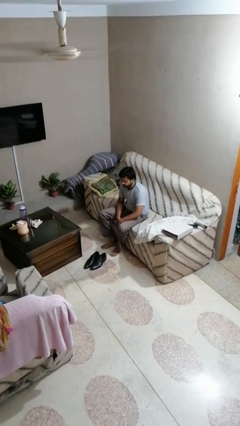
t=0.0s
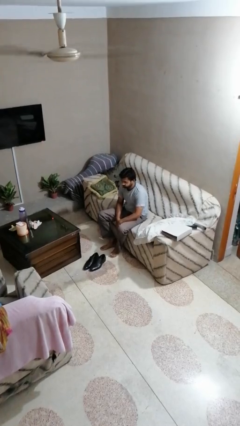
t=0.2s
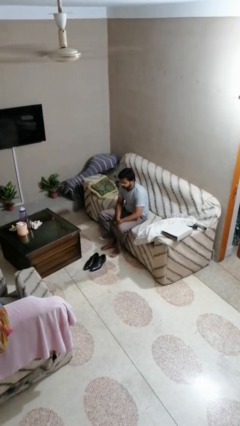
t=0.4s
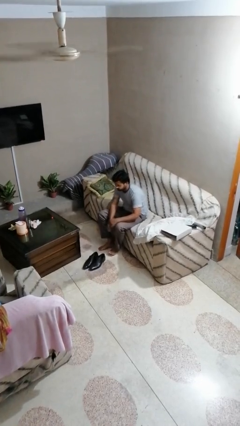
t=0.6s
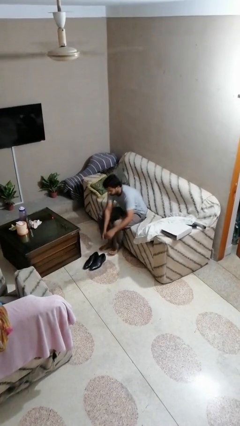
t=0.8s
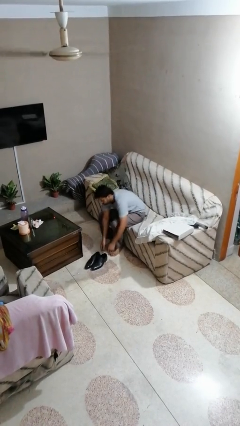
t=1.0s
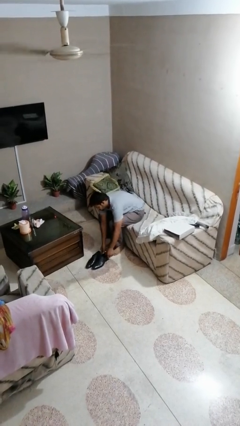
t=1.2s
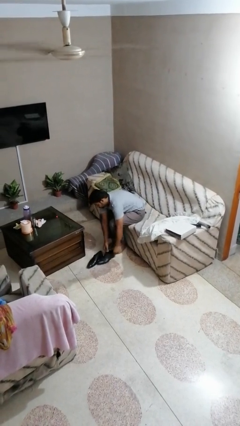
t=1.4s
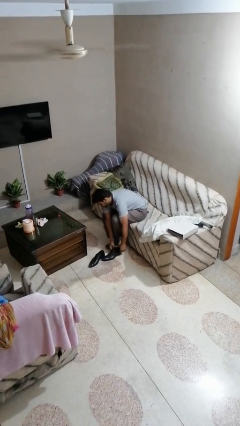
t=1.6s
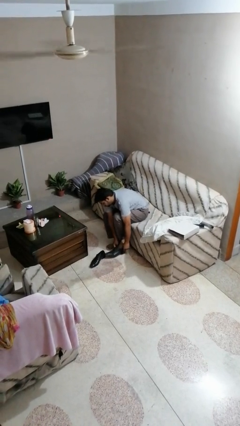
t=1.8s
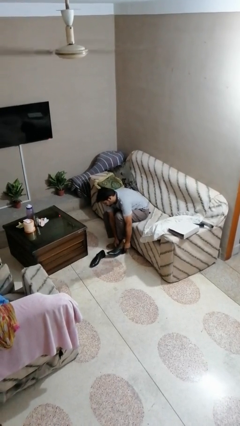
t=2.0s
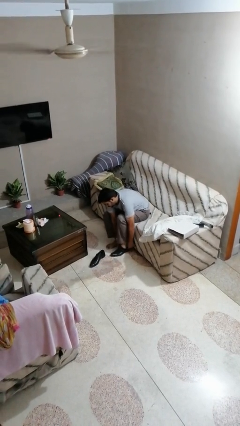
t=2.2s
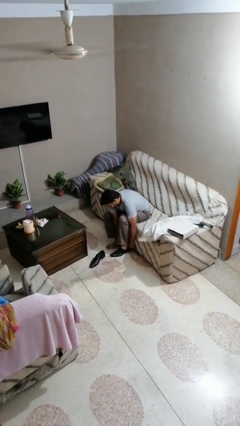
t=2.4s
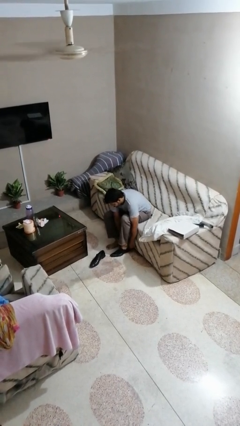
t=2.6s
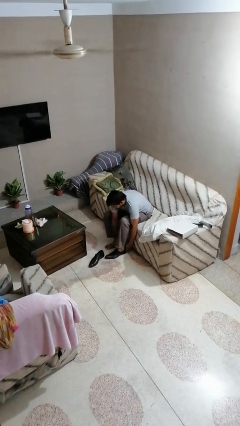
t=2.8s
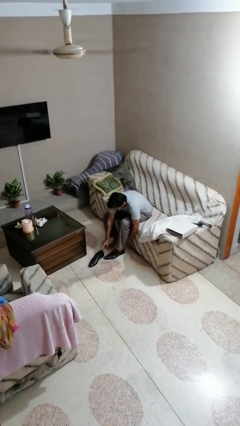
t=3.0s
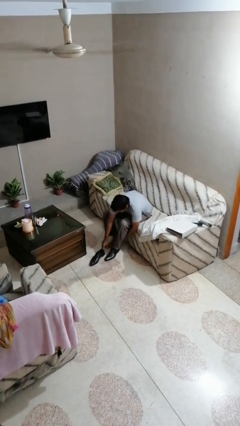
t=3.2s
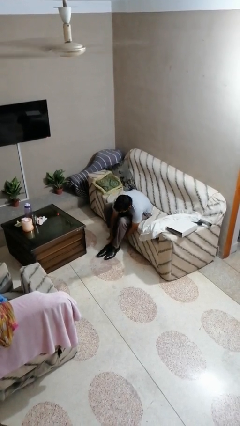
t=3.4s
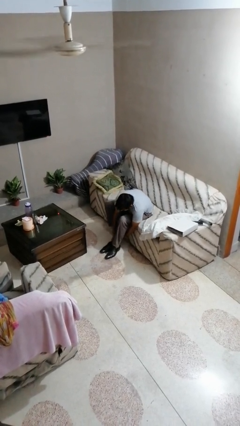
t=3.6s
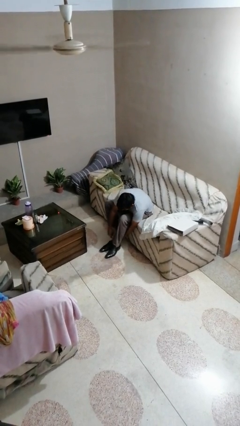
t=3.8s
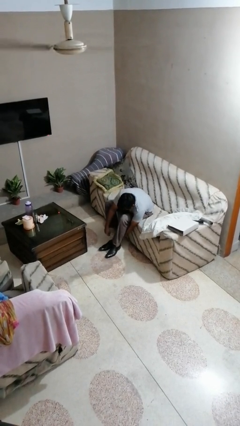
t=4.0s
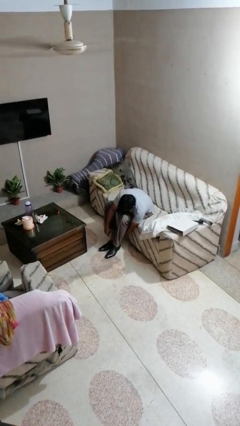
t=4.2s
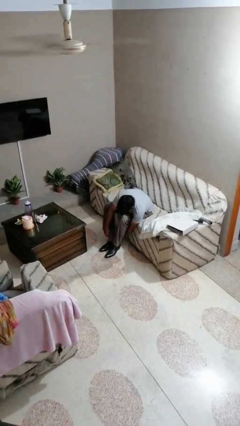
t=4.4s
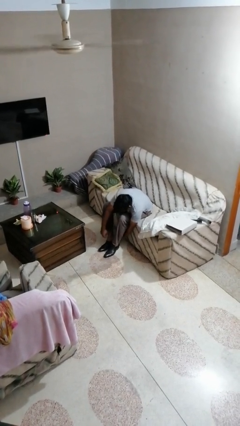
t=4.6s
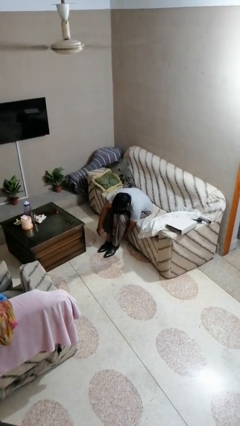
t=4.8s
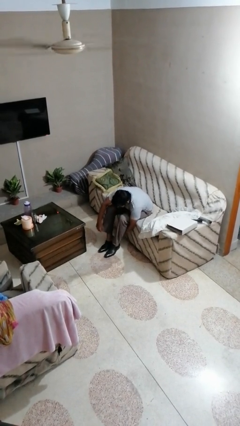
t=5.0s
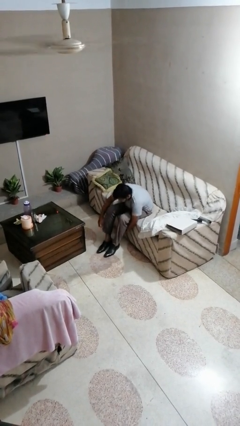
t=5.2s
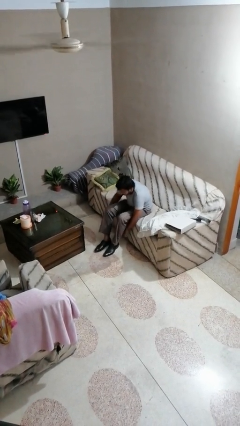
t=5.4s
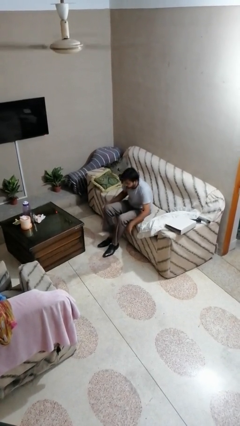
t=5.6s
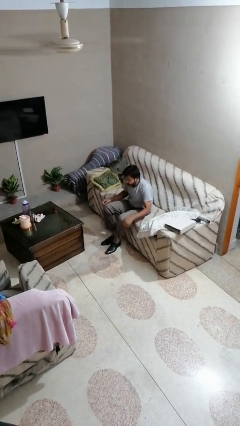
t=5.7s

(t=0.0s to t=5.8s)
person puts on shoes

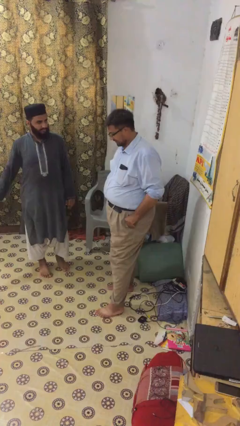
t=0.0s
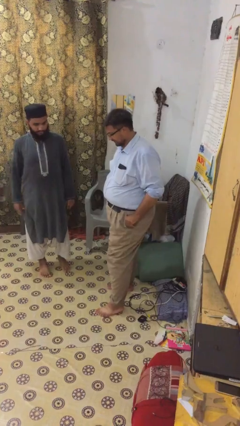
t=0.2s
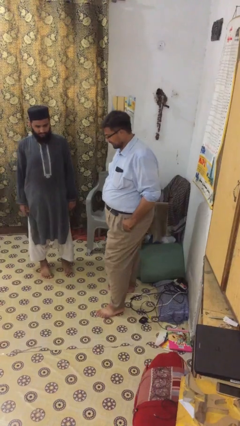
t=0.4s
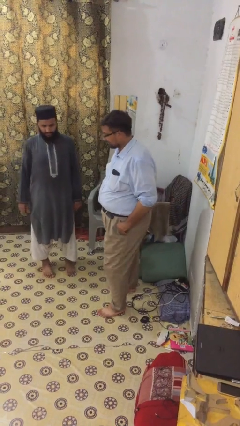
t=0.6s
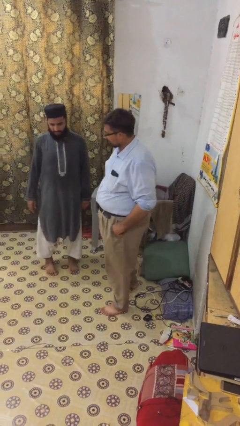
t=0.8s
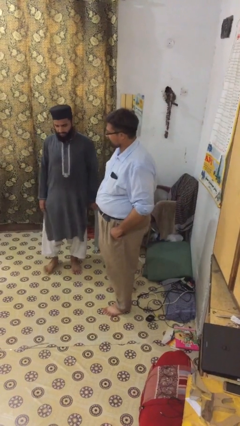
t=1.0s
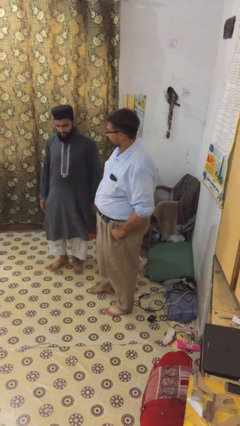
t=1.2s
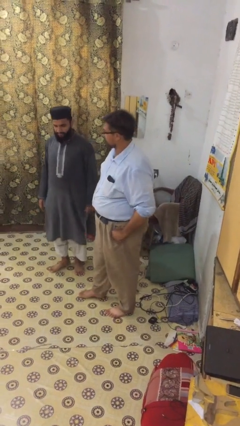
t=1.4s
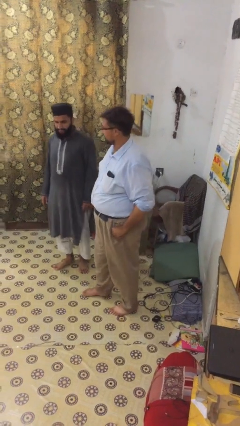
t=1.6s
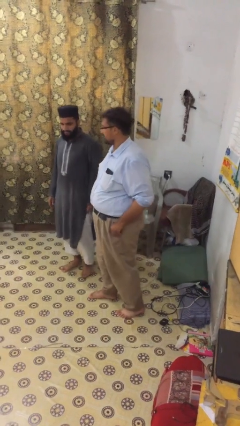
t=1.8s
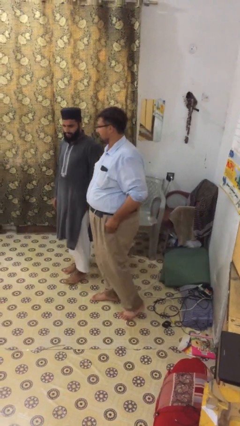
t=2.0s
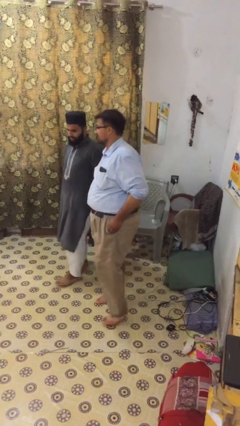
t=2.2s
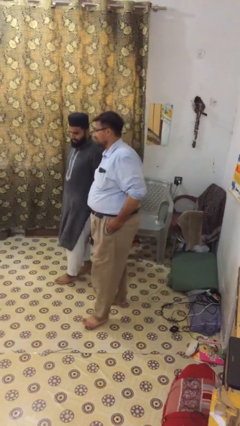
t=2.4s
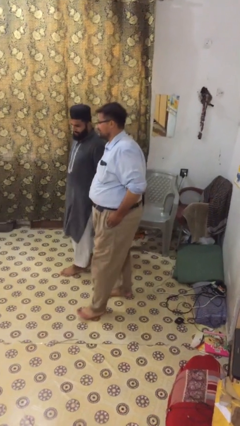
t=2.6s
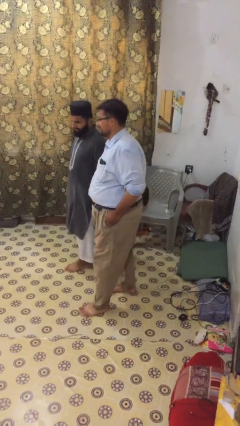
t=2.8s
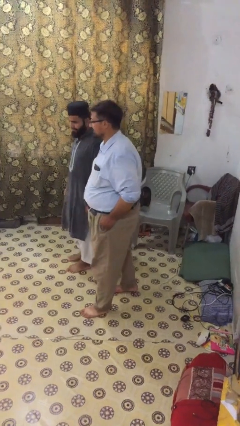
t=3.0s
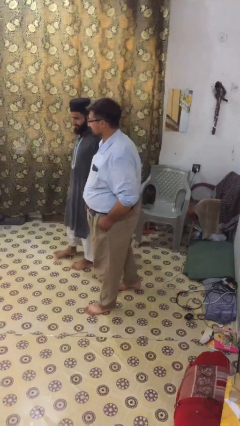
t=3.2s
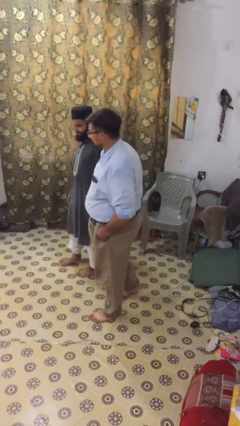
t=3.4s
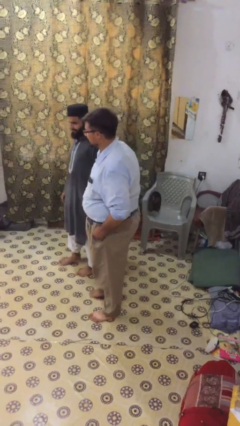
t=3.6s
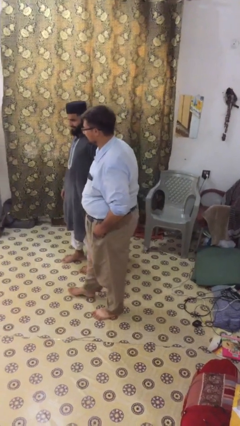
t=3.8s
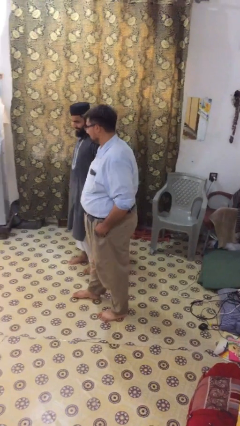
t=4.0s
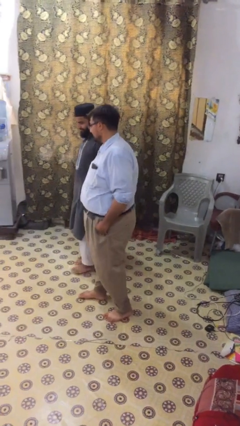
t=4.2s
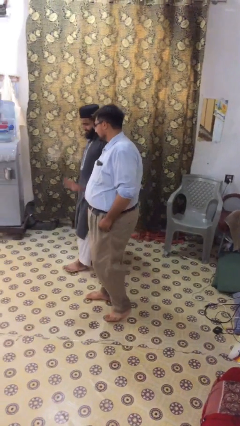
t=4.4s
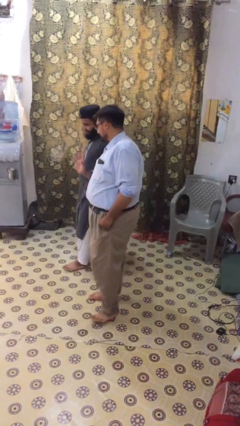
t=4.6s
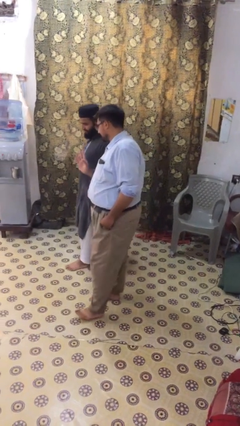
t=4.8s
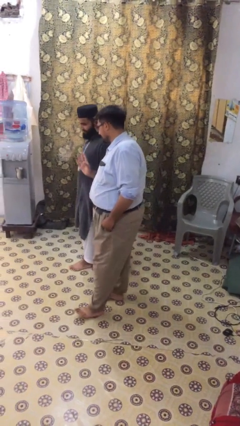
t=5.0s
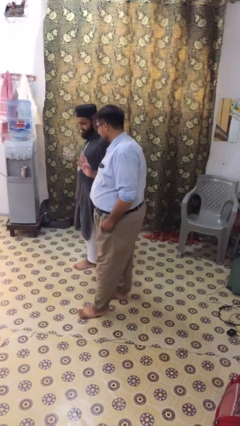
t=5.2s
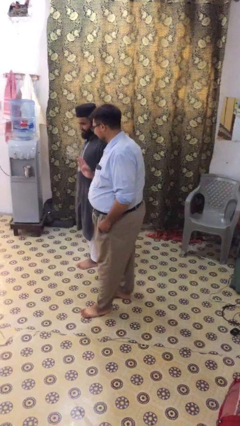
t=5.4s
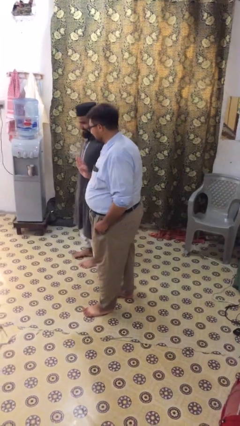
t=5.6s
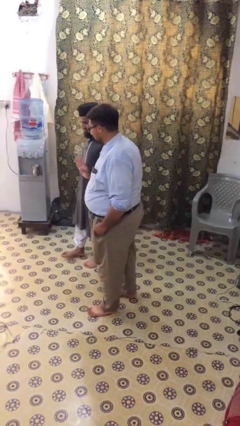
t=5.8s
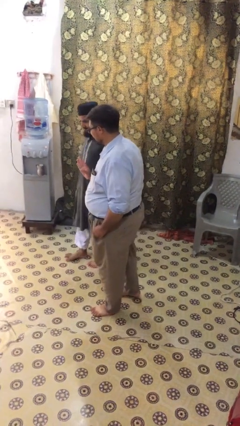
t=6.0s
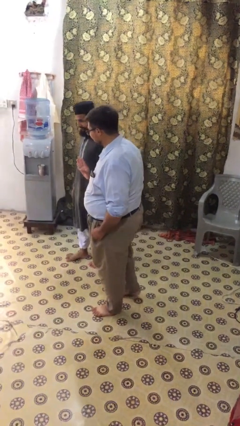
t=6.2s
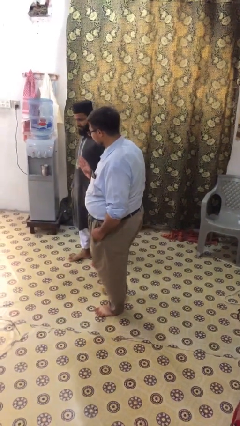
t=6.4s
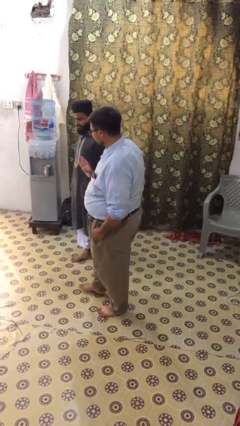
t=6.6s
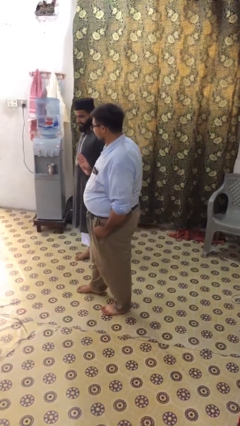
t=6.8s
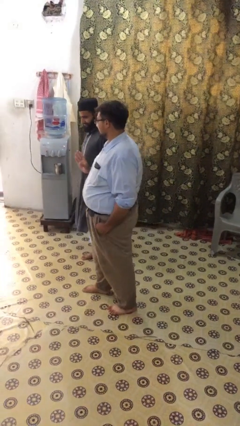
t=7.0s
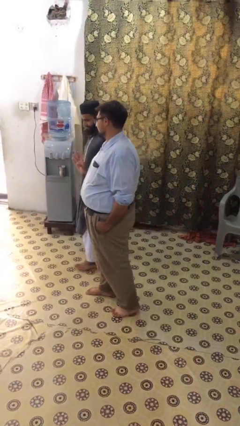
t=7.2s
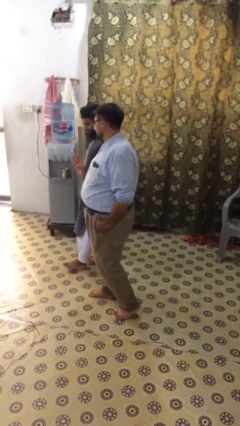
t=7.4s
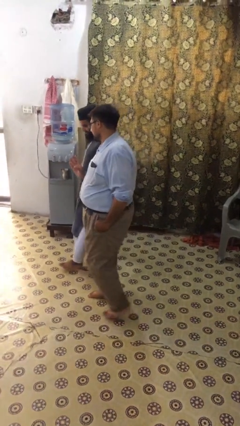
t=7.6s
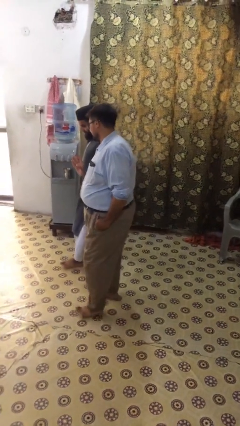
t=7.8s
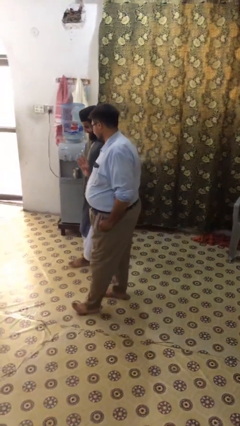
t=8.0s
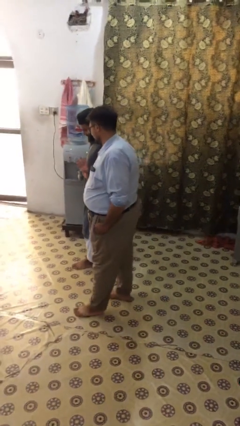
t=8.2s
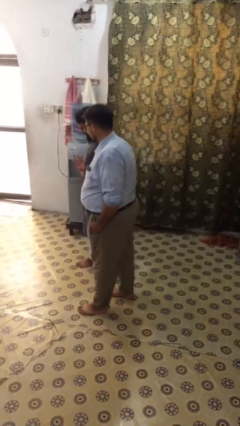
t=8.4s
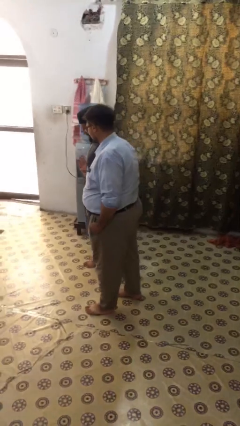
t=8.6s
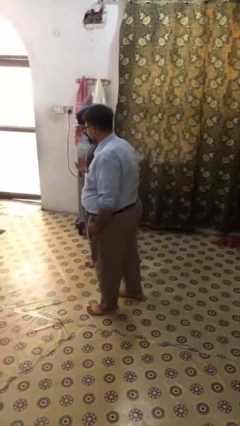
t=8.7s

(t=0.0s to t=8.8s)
person talks to person

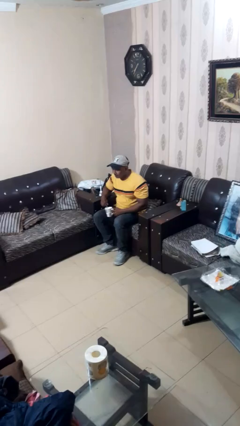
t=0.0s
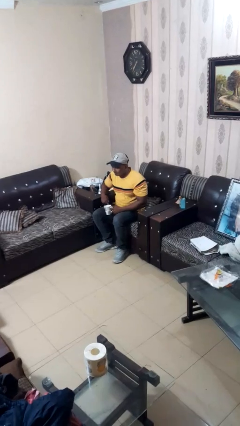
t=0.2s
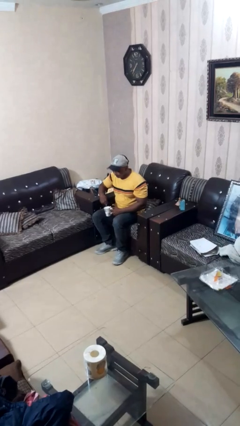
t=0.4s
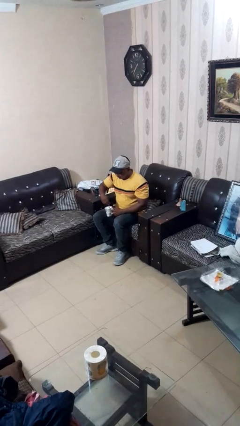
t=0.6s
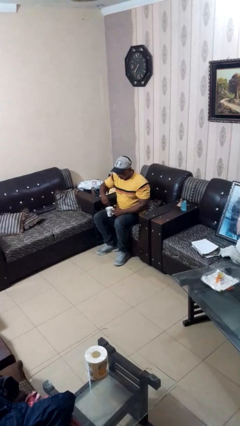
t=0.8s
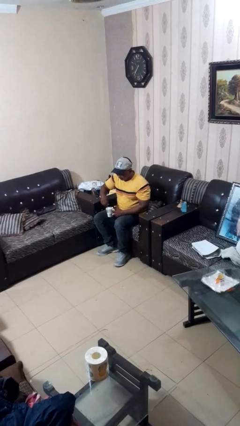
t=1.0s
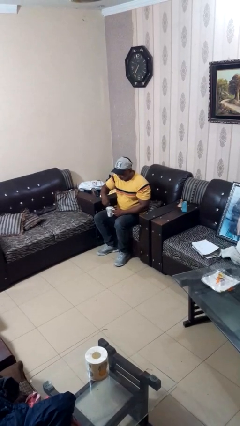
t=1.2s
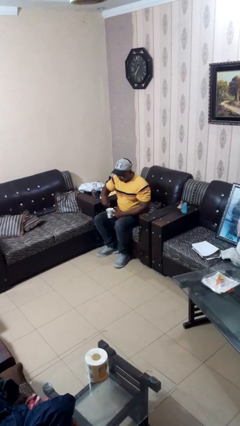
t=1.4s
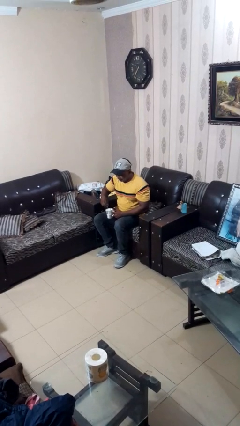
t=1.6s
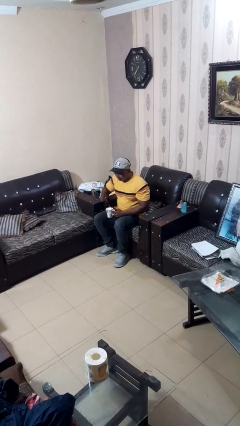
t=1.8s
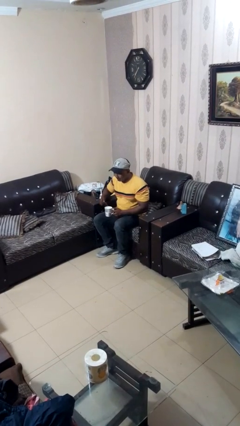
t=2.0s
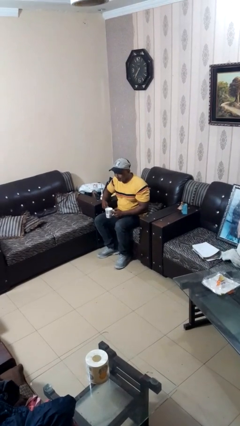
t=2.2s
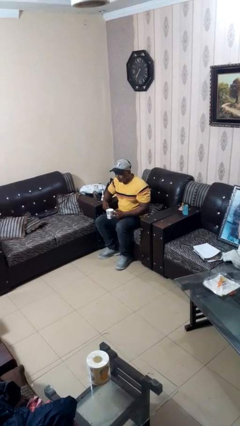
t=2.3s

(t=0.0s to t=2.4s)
person stirs mug

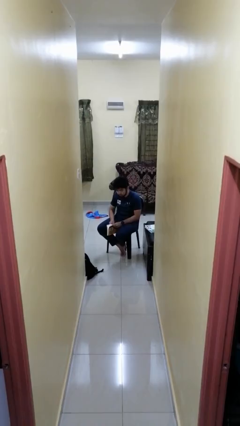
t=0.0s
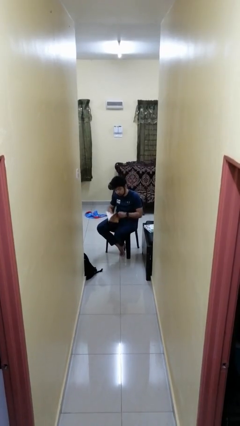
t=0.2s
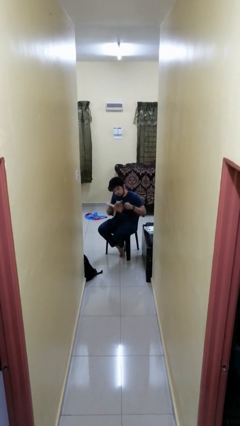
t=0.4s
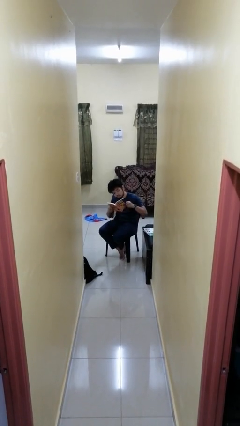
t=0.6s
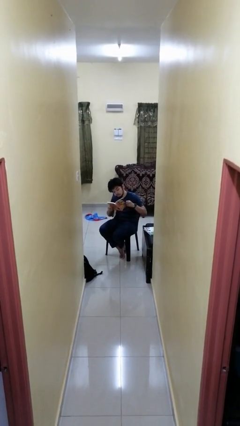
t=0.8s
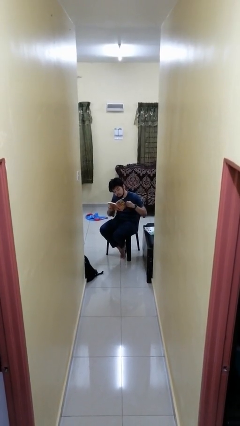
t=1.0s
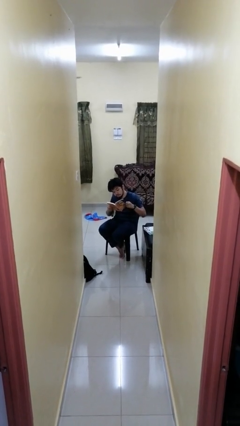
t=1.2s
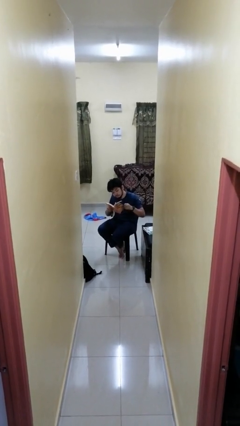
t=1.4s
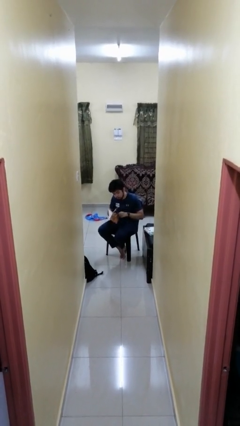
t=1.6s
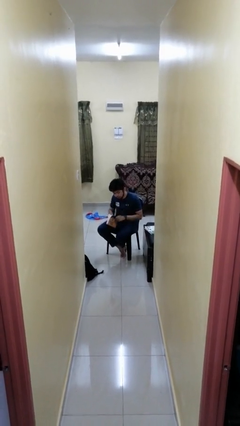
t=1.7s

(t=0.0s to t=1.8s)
person reads book
